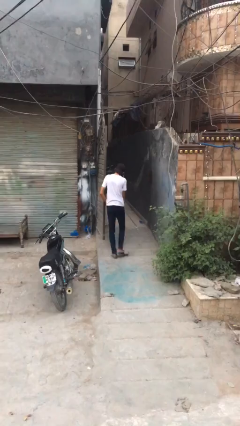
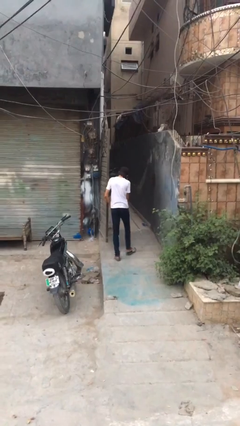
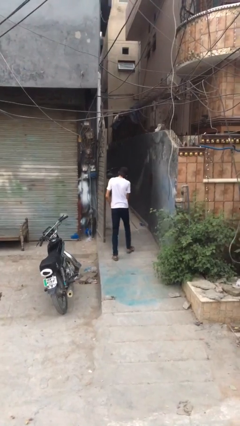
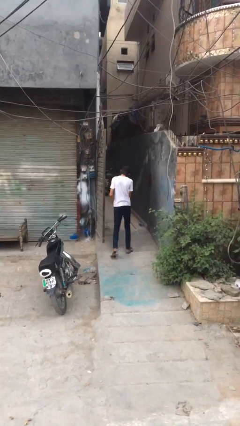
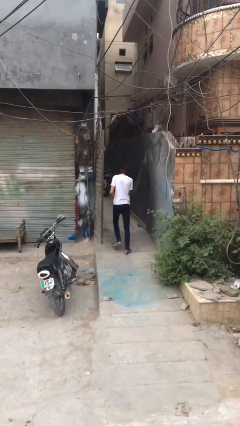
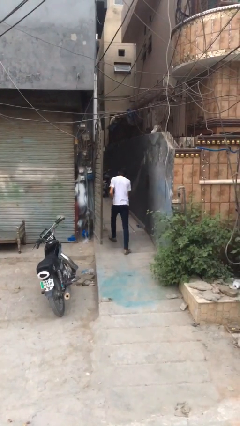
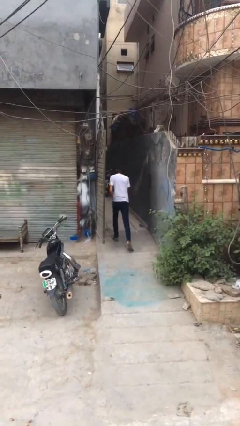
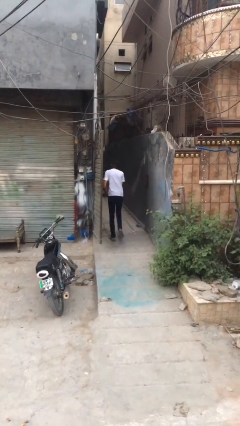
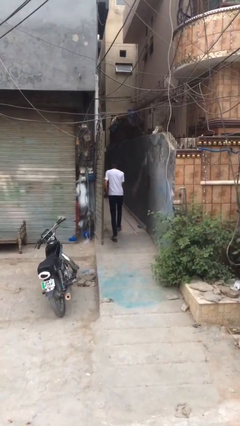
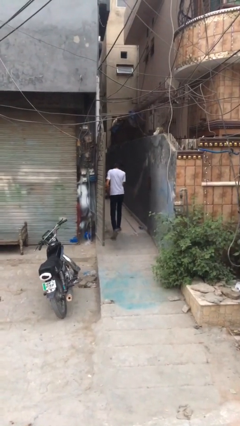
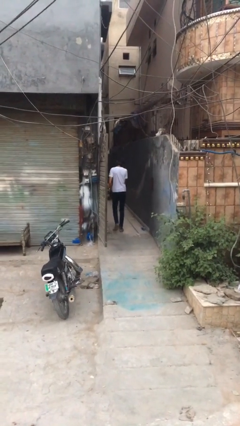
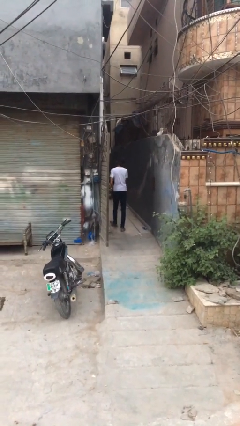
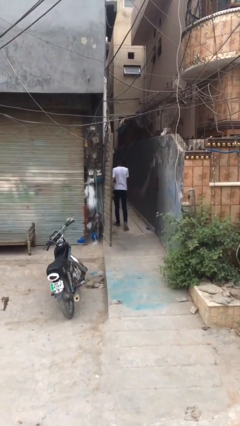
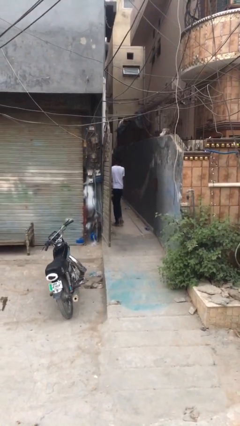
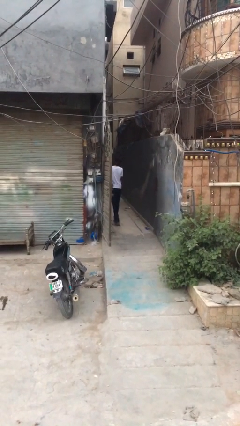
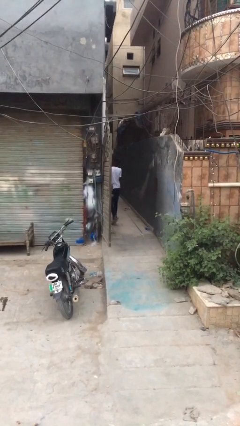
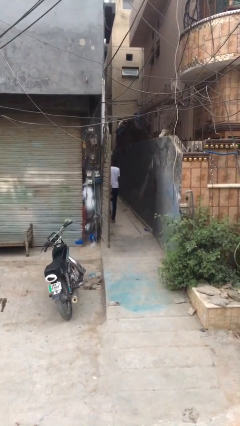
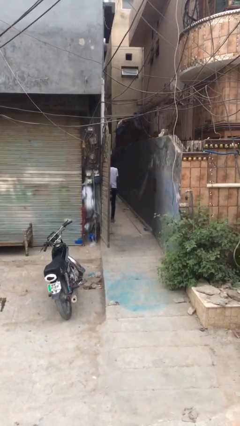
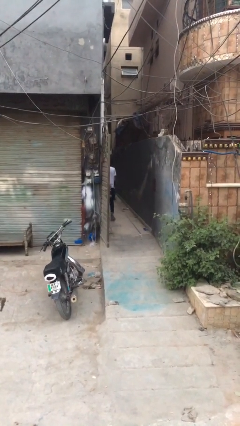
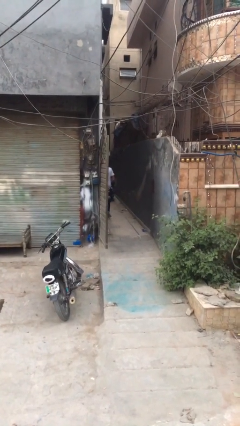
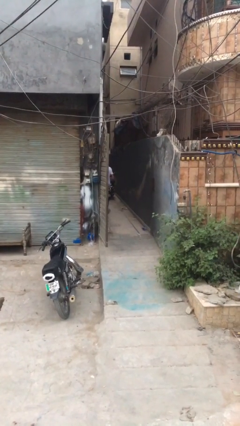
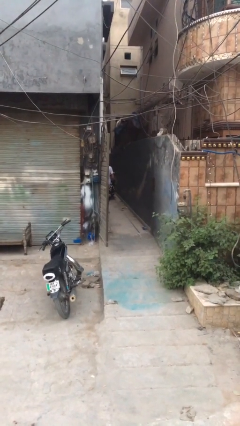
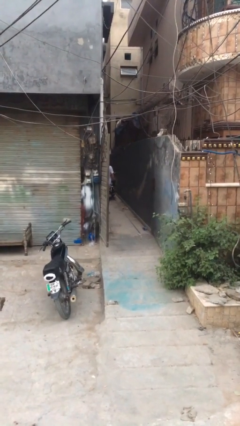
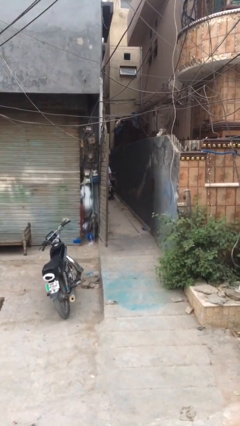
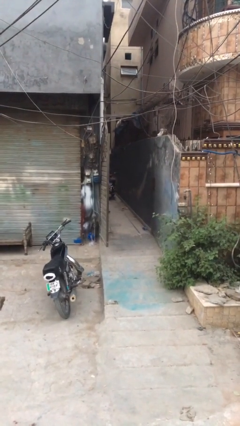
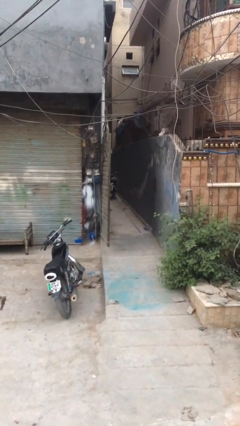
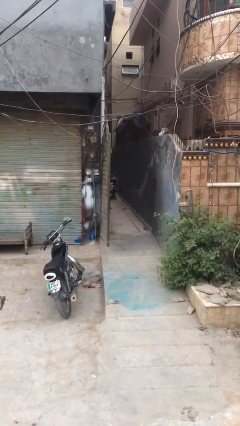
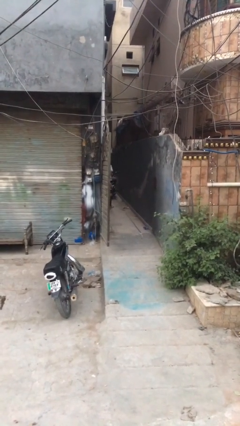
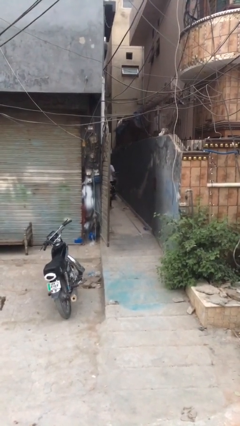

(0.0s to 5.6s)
person exits scene through structure

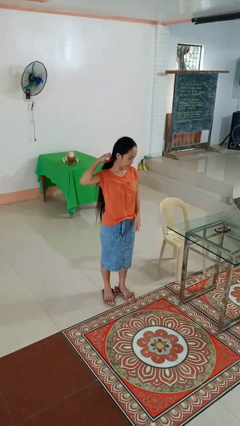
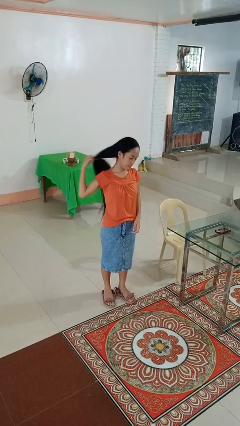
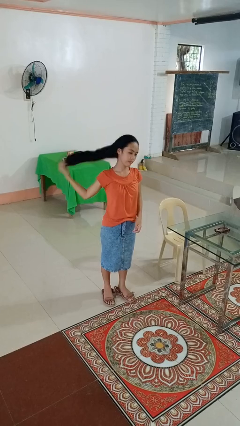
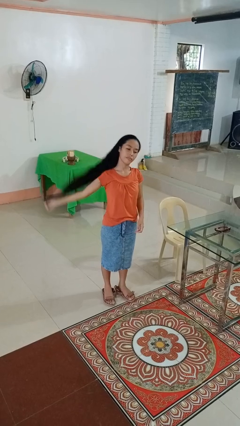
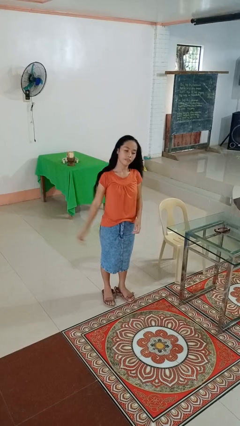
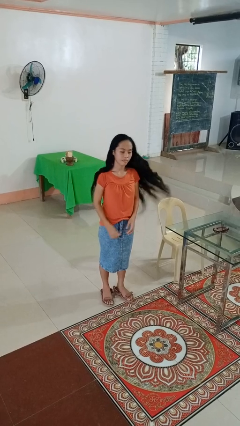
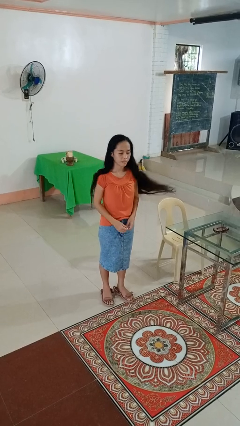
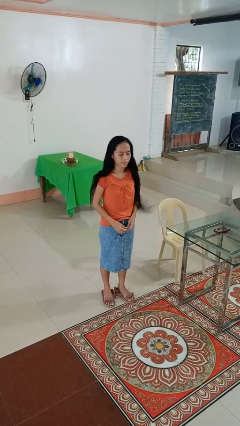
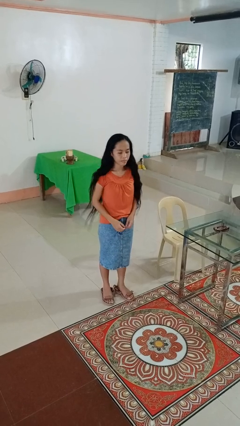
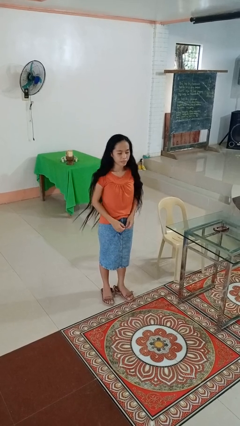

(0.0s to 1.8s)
person takes off hairtie

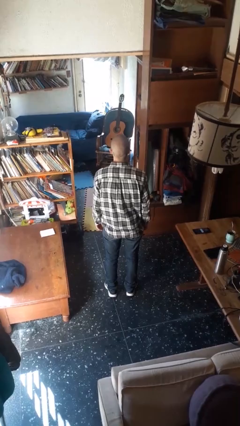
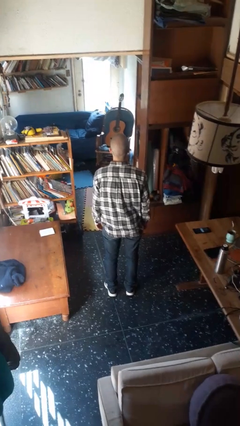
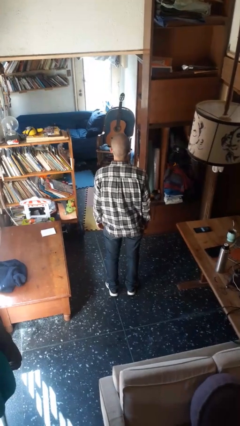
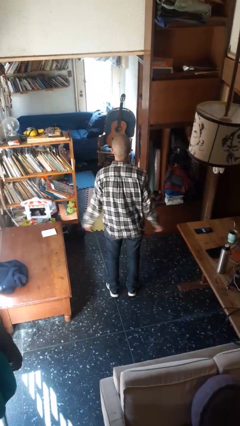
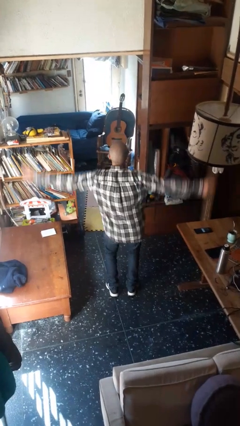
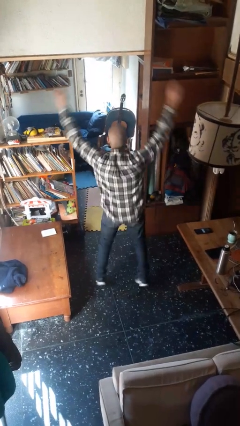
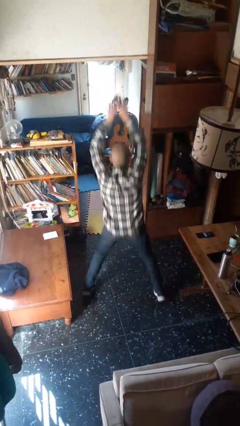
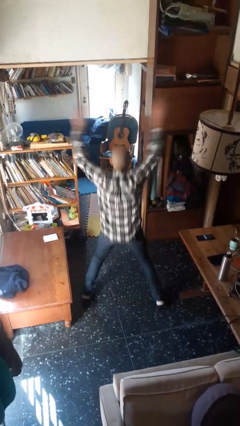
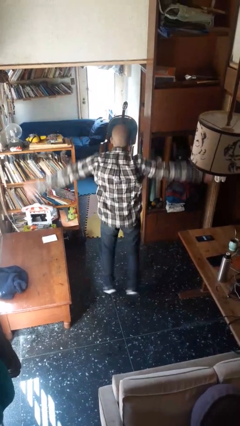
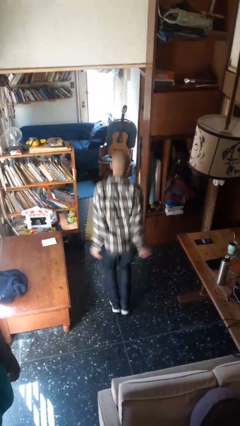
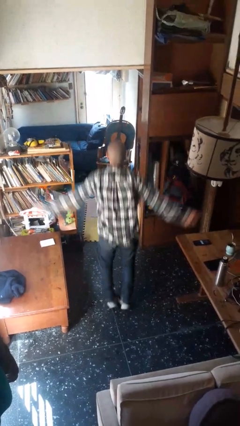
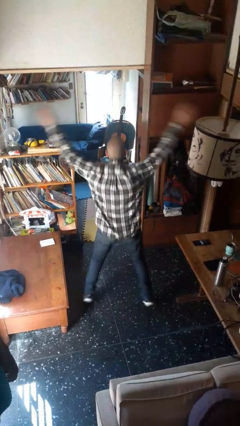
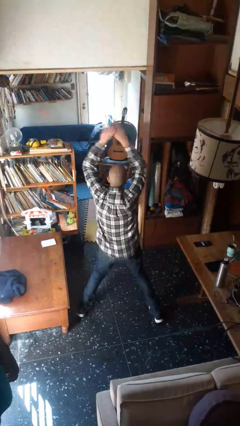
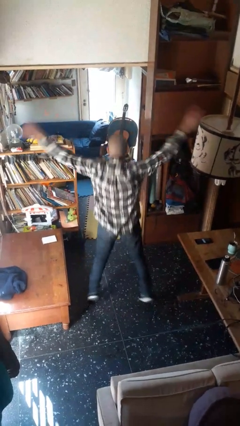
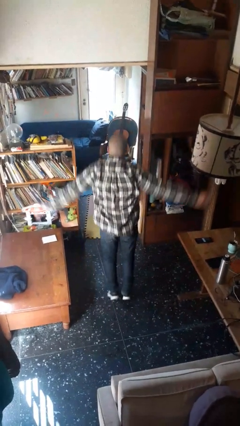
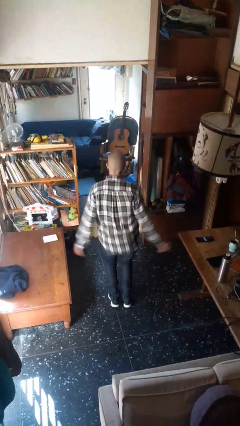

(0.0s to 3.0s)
person exercises with jumping jacks

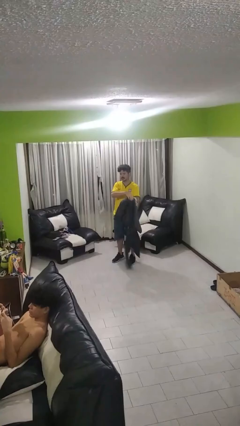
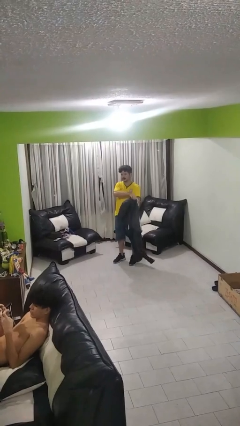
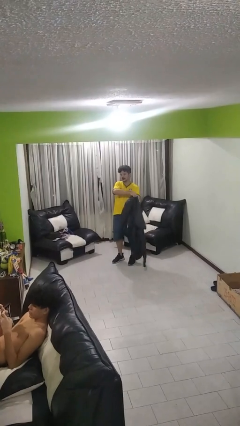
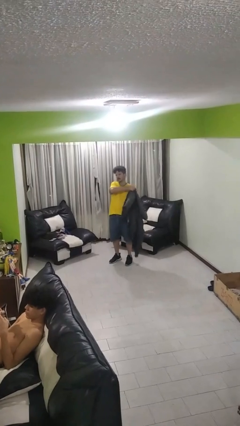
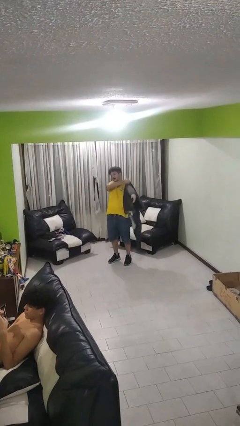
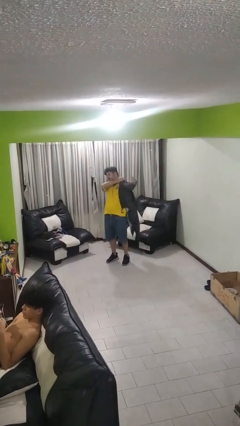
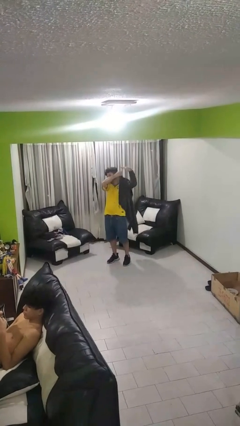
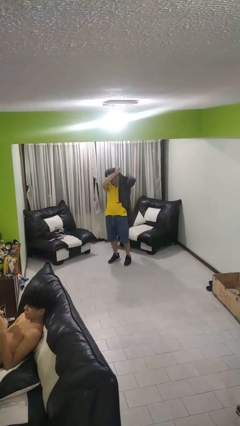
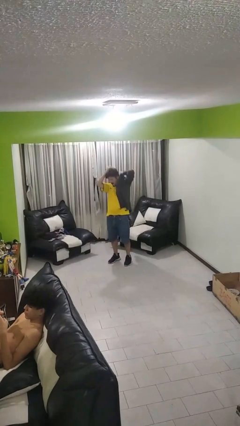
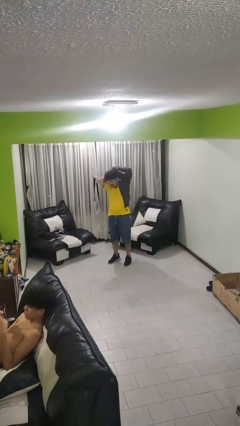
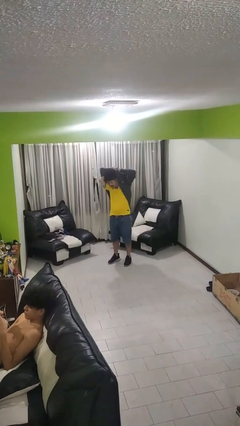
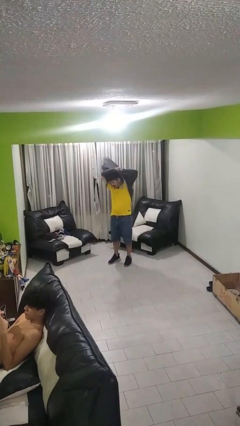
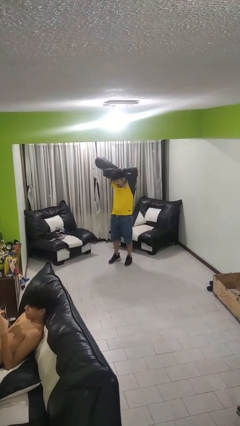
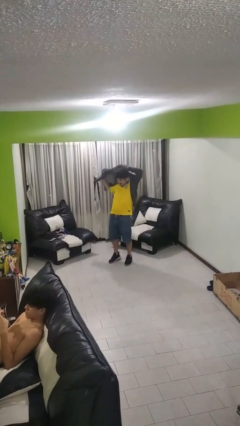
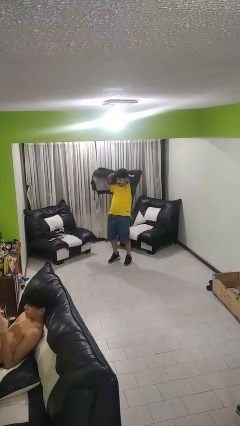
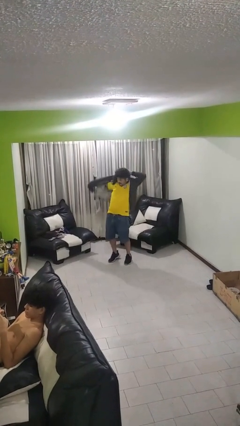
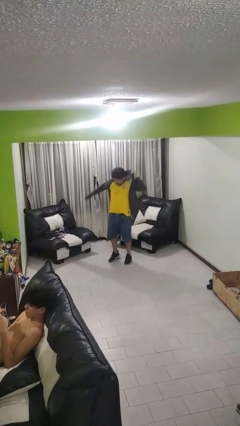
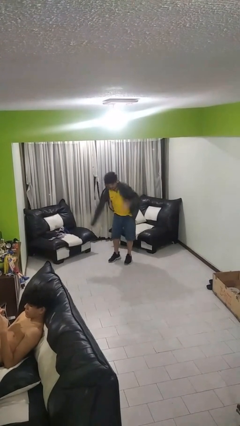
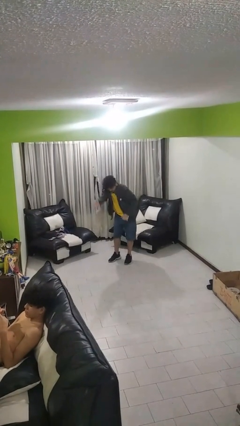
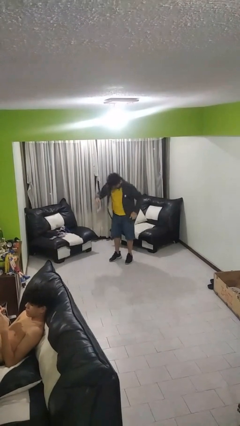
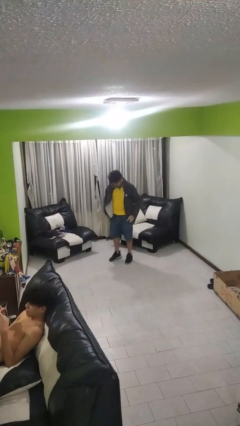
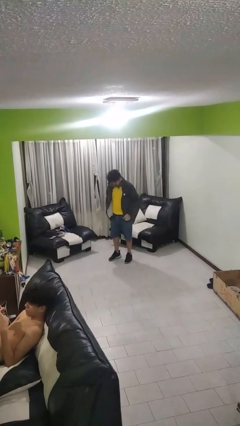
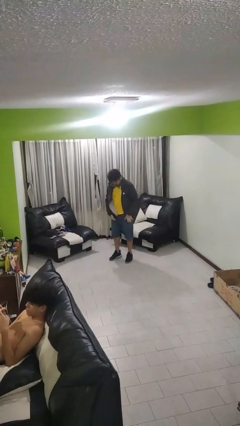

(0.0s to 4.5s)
person puts on jacket

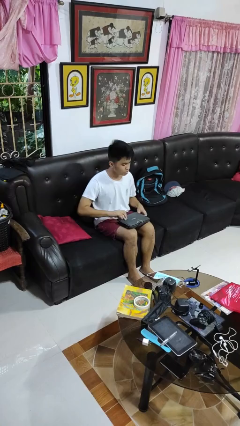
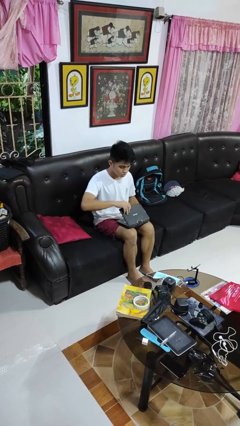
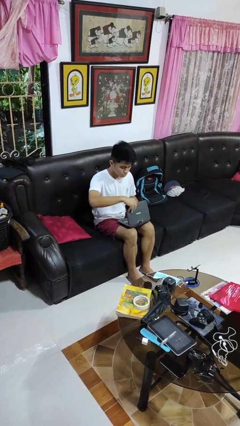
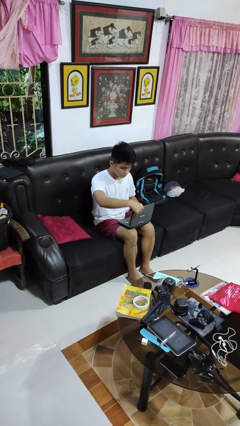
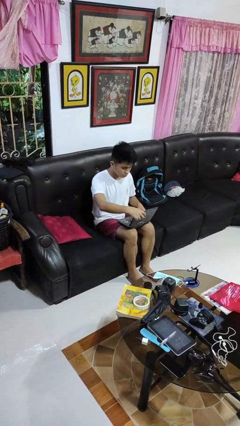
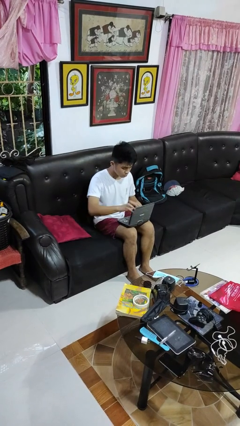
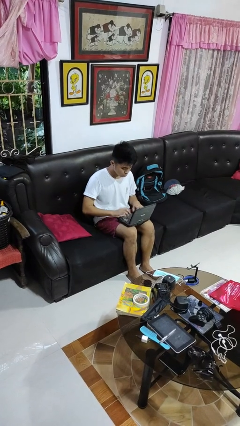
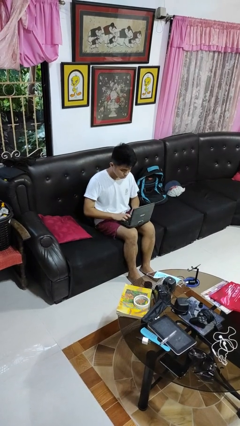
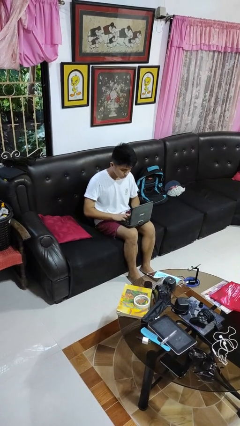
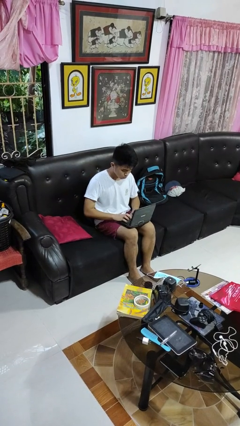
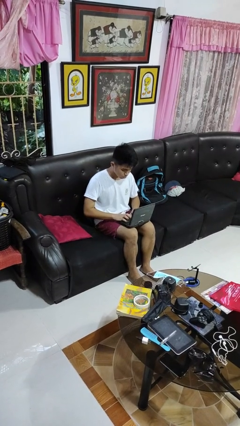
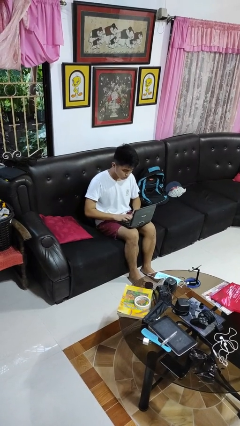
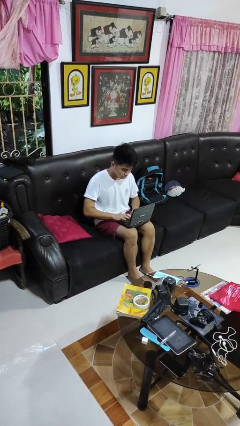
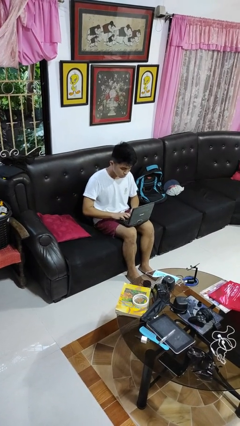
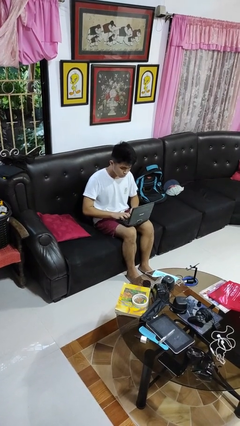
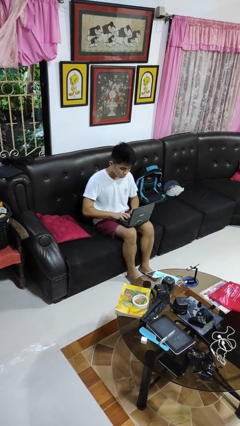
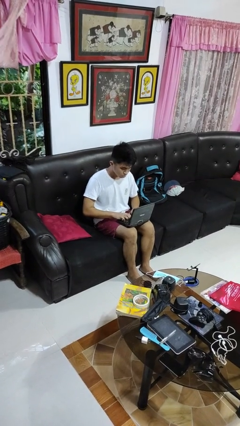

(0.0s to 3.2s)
person opens laptop
